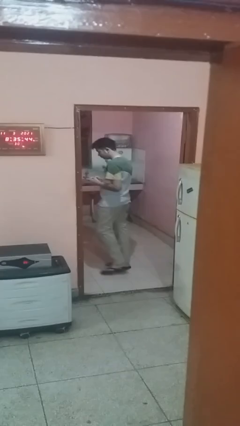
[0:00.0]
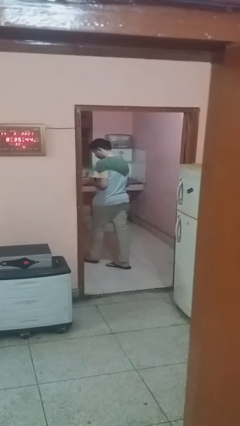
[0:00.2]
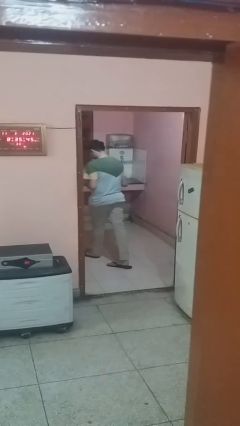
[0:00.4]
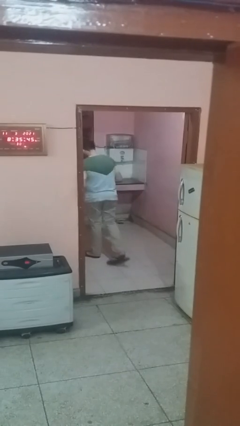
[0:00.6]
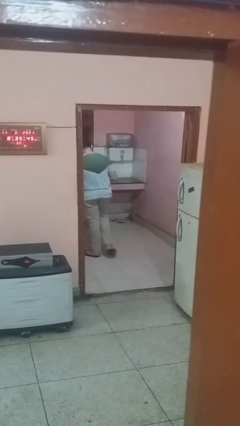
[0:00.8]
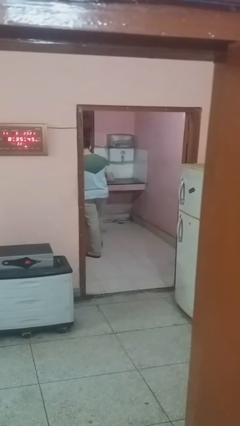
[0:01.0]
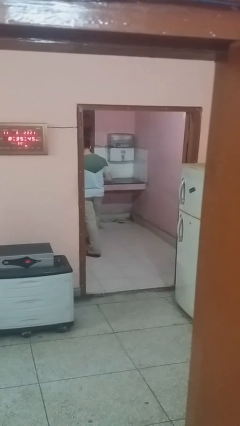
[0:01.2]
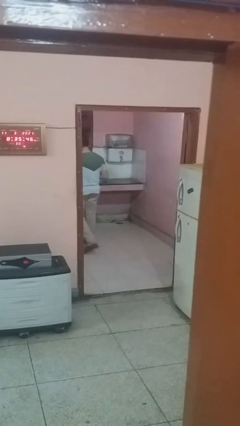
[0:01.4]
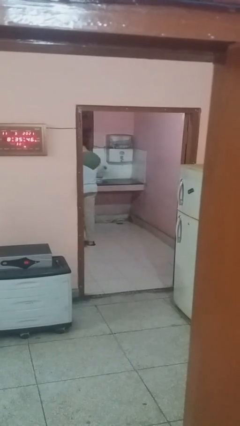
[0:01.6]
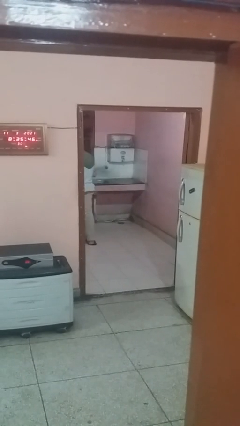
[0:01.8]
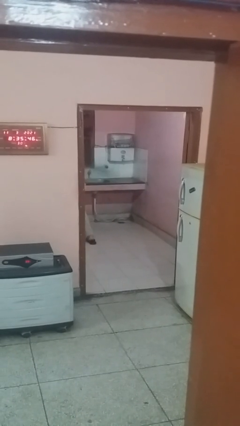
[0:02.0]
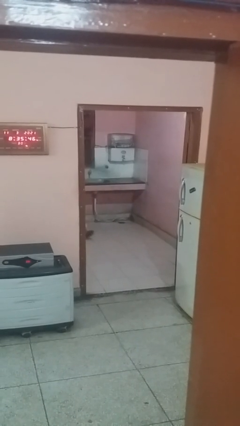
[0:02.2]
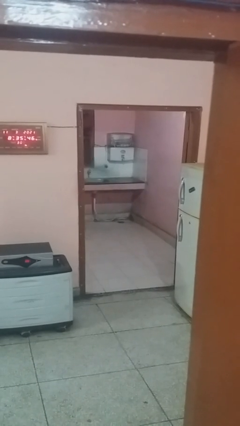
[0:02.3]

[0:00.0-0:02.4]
person exits scene through structure

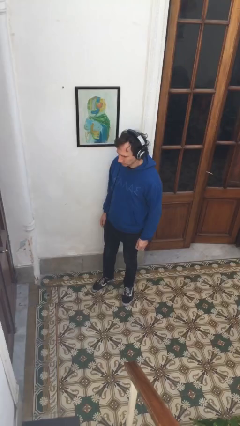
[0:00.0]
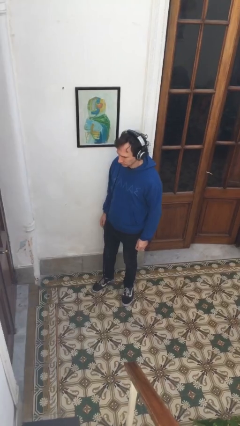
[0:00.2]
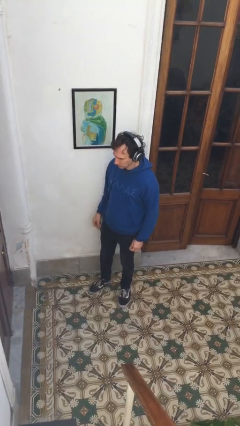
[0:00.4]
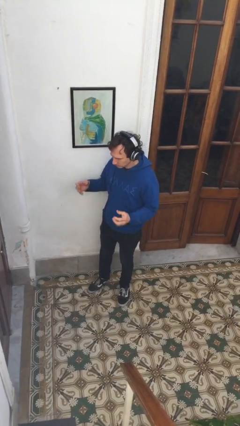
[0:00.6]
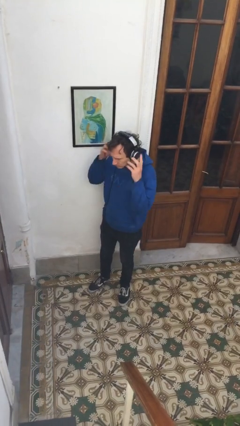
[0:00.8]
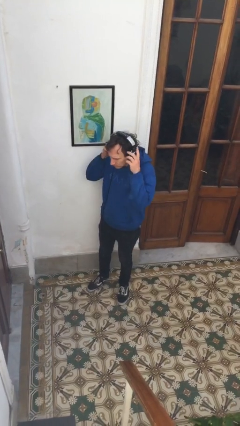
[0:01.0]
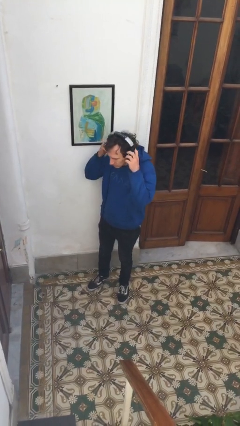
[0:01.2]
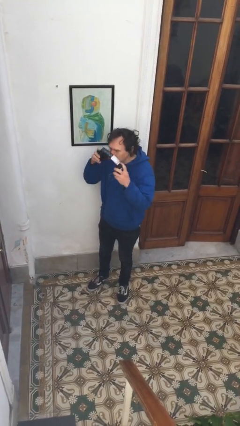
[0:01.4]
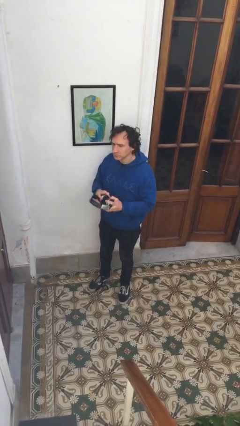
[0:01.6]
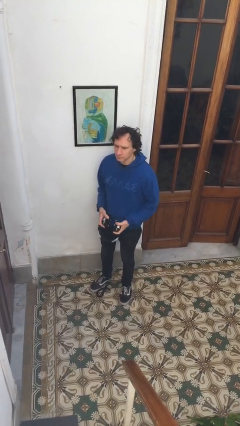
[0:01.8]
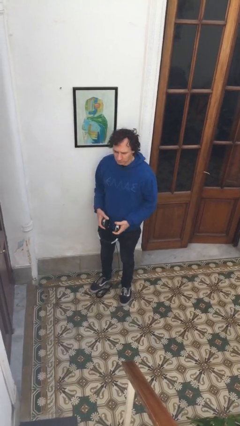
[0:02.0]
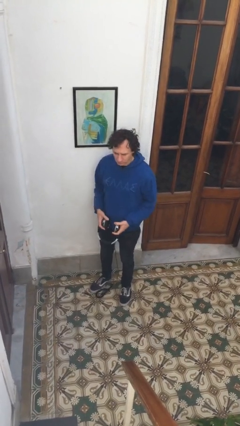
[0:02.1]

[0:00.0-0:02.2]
person takes off headphones

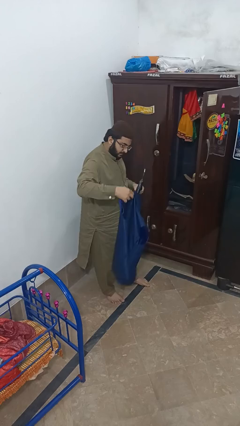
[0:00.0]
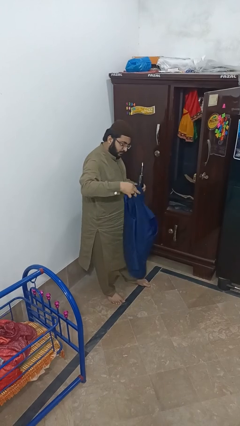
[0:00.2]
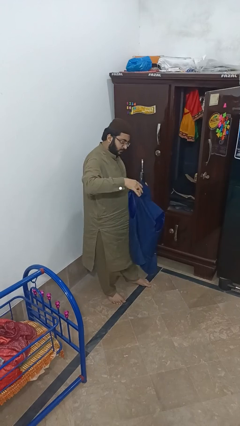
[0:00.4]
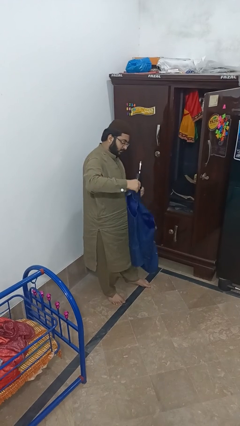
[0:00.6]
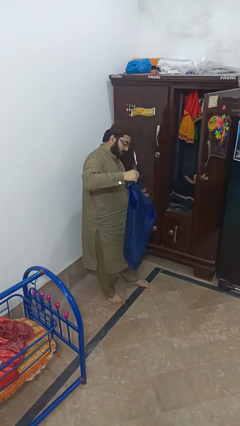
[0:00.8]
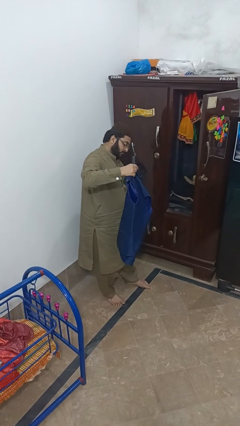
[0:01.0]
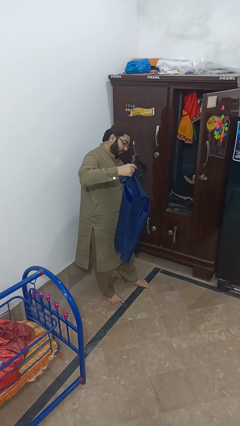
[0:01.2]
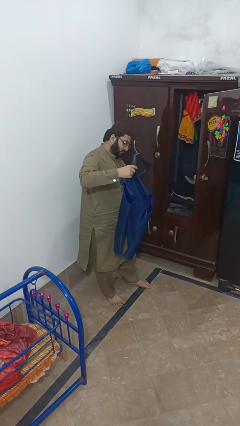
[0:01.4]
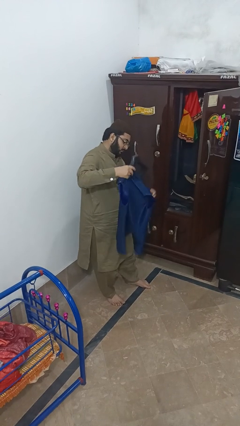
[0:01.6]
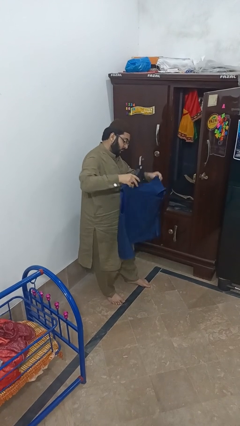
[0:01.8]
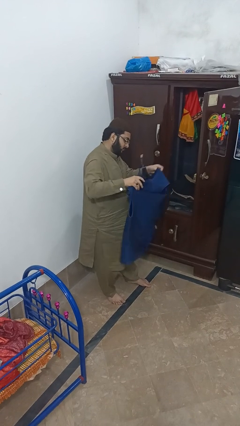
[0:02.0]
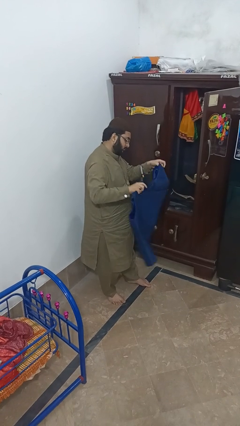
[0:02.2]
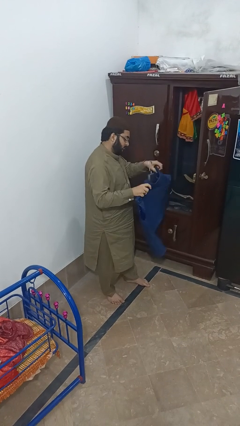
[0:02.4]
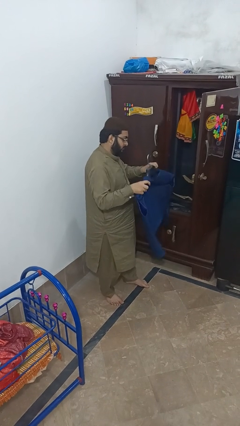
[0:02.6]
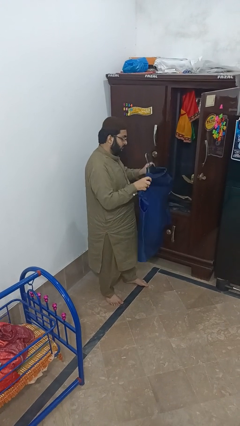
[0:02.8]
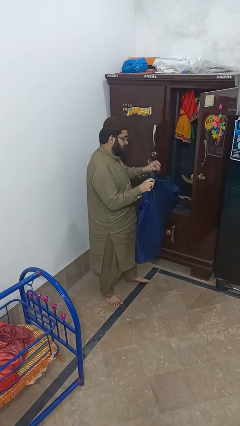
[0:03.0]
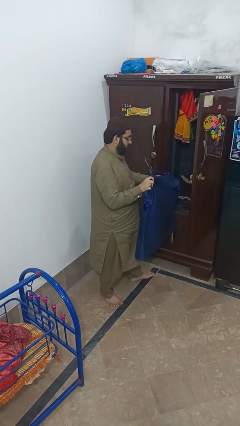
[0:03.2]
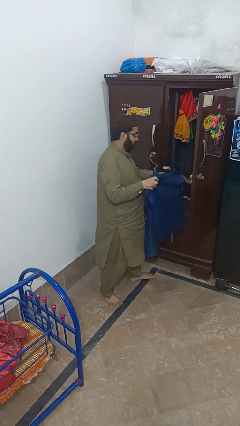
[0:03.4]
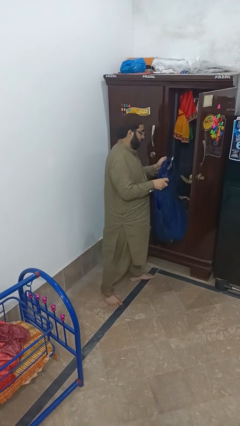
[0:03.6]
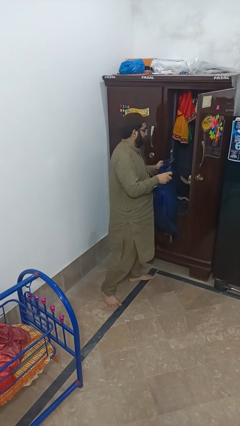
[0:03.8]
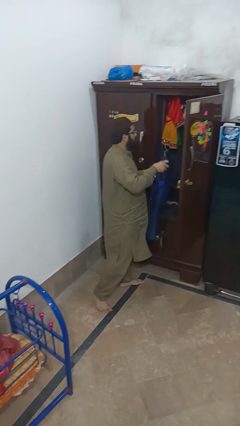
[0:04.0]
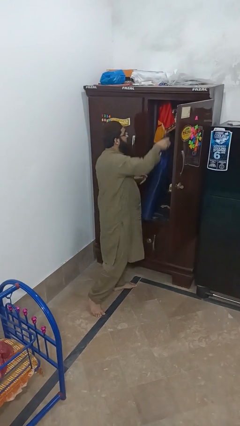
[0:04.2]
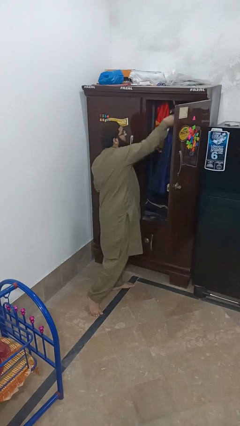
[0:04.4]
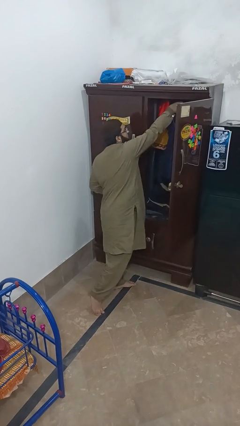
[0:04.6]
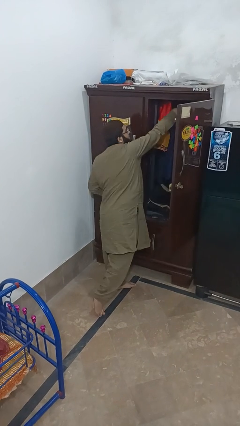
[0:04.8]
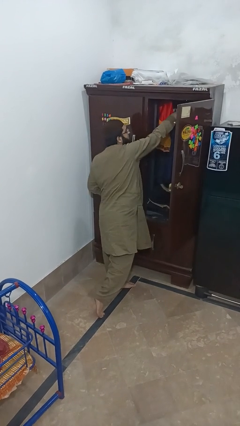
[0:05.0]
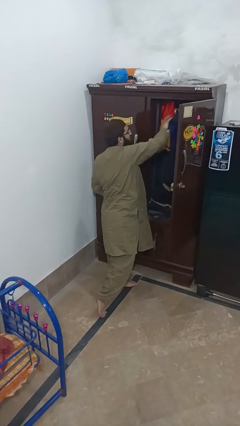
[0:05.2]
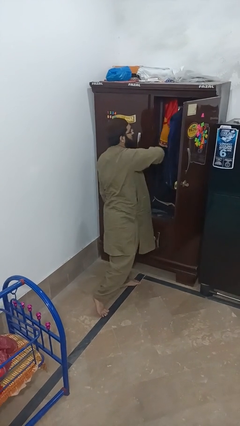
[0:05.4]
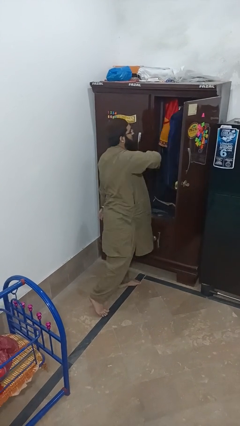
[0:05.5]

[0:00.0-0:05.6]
person puts clothes into closet

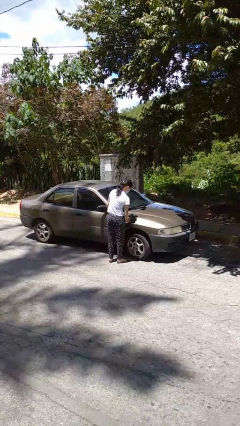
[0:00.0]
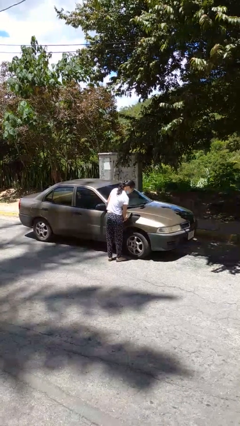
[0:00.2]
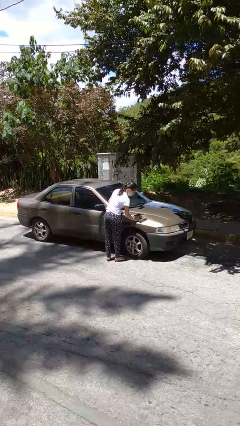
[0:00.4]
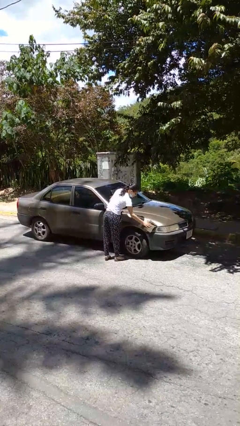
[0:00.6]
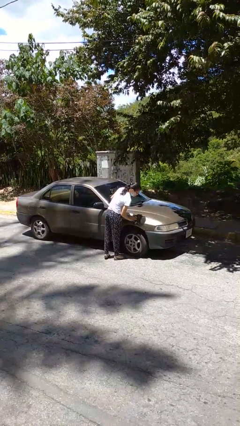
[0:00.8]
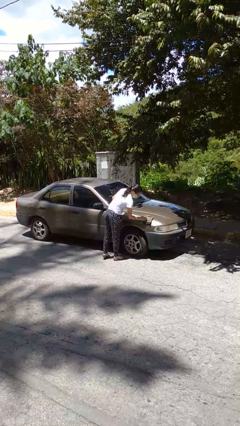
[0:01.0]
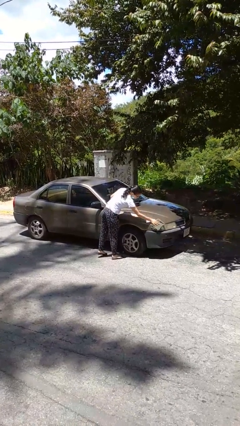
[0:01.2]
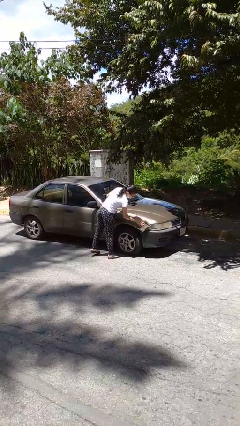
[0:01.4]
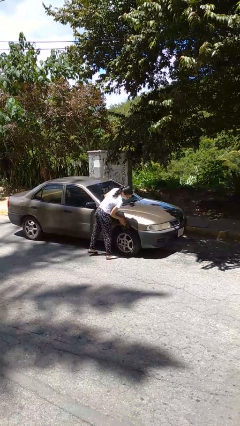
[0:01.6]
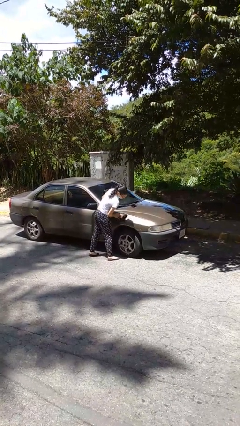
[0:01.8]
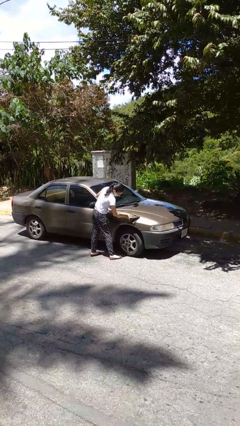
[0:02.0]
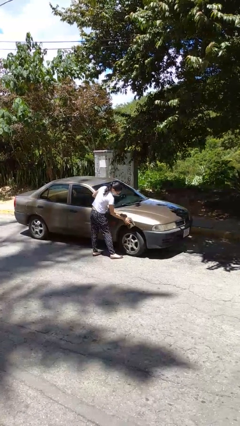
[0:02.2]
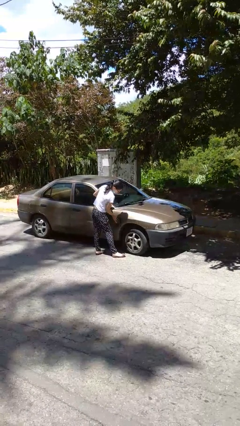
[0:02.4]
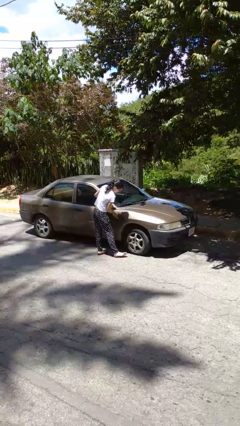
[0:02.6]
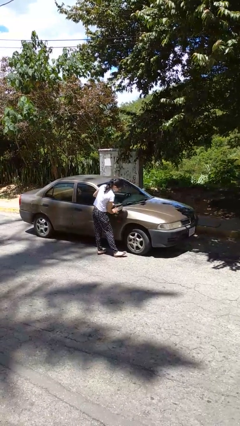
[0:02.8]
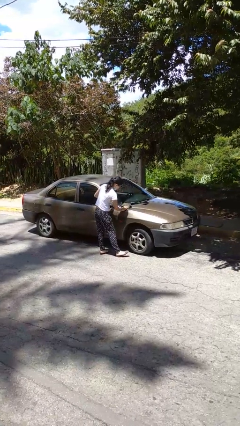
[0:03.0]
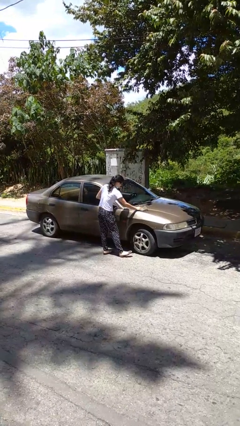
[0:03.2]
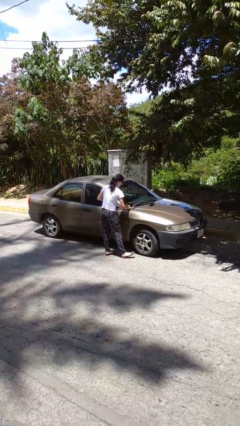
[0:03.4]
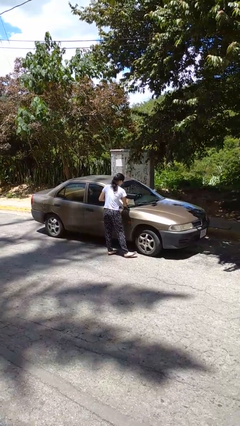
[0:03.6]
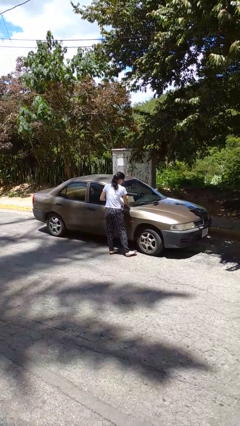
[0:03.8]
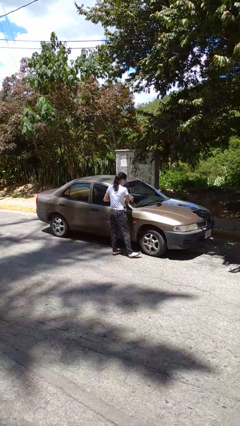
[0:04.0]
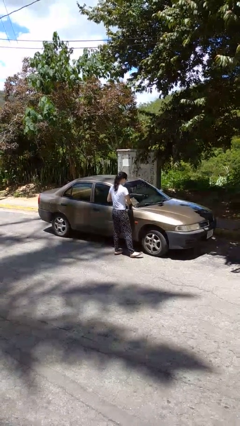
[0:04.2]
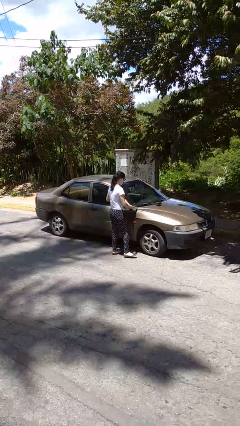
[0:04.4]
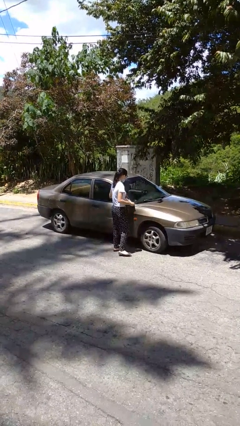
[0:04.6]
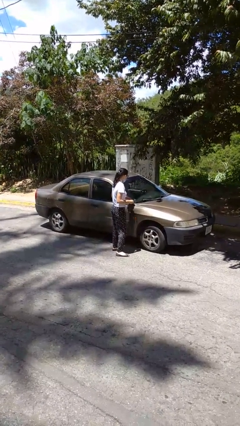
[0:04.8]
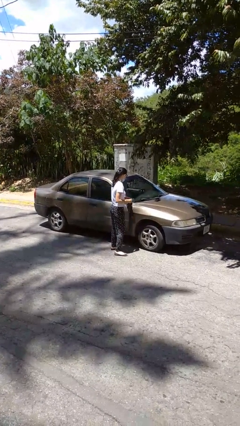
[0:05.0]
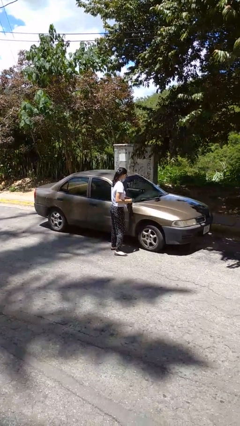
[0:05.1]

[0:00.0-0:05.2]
person polishes car with rag

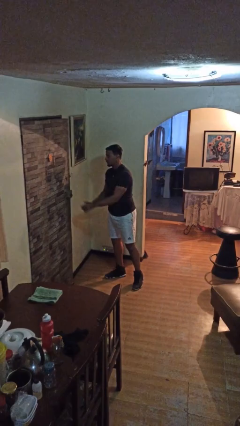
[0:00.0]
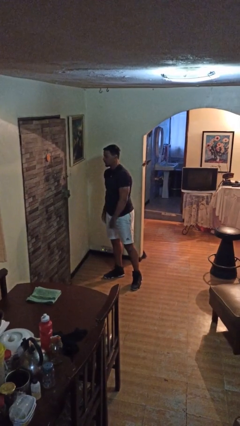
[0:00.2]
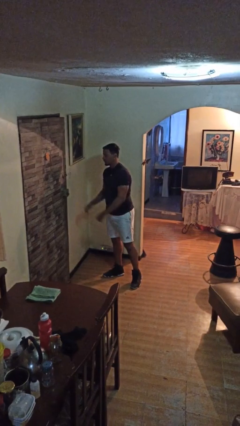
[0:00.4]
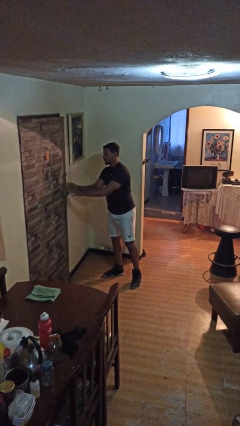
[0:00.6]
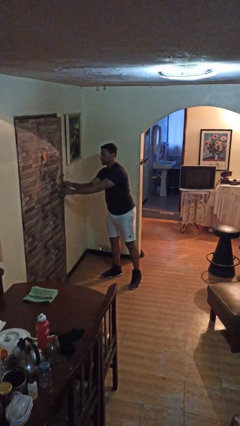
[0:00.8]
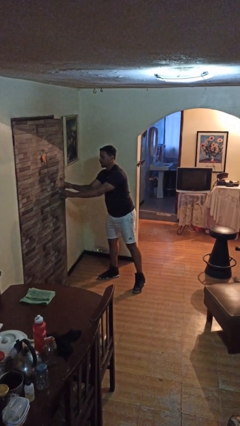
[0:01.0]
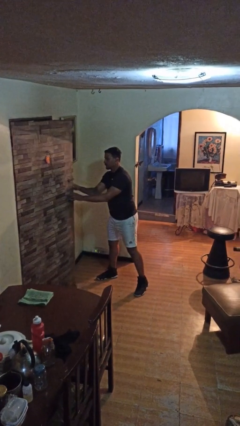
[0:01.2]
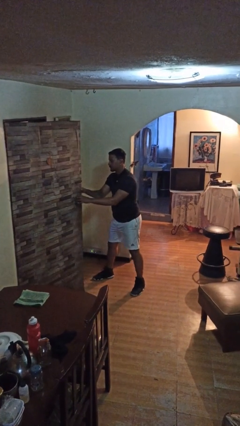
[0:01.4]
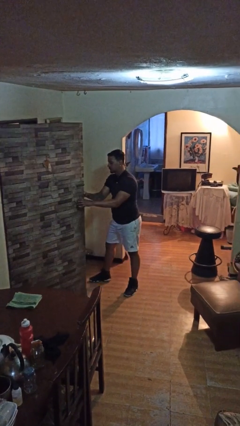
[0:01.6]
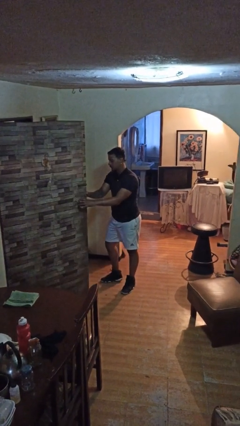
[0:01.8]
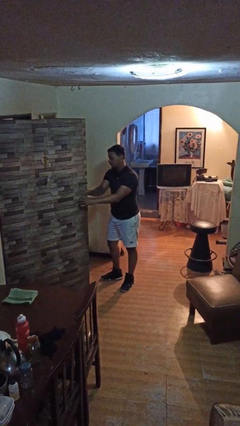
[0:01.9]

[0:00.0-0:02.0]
person opens facility door

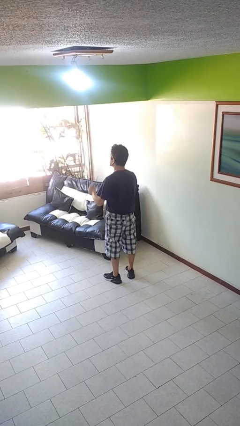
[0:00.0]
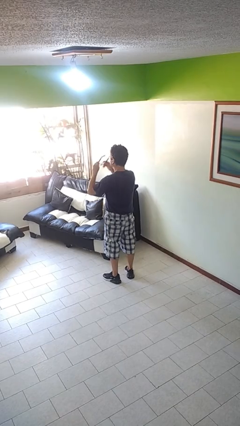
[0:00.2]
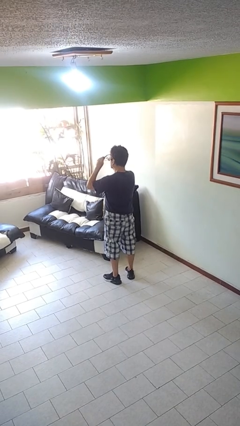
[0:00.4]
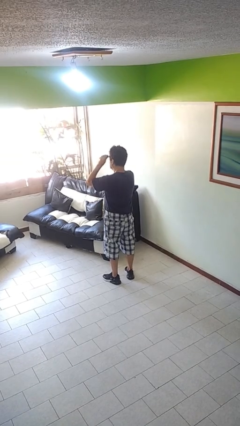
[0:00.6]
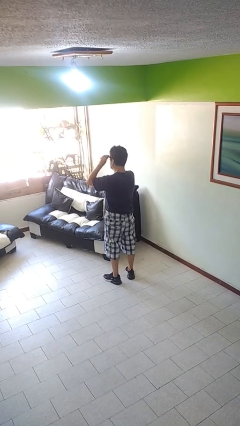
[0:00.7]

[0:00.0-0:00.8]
person puts on glasses
